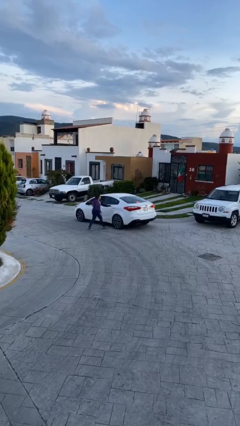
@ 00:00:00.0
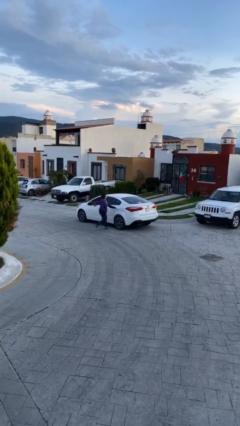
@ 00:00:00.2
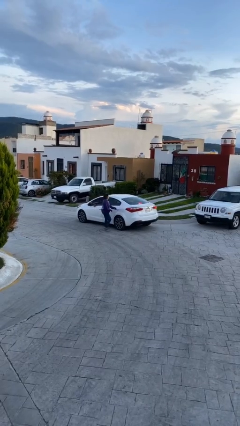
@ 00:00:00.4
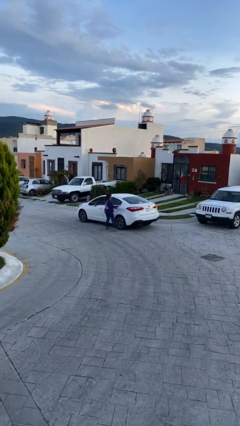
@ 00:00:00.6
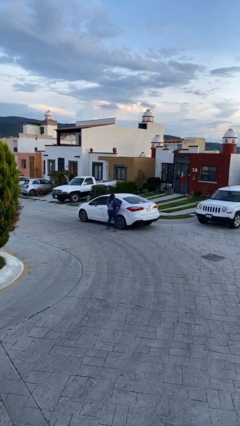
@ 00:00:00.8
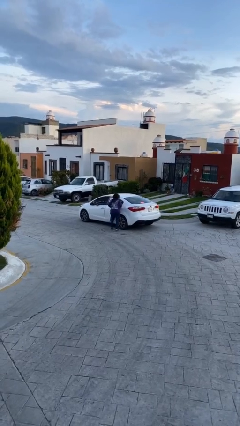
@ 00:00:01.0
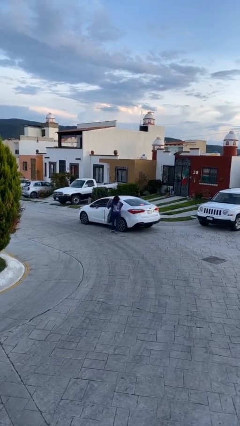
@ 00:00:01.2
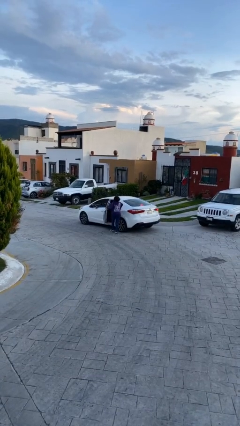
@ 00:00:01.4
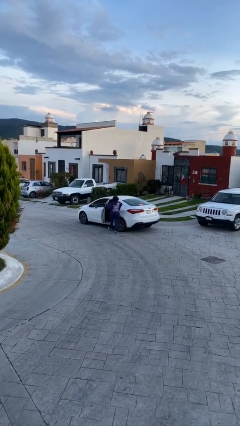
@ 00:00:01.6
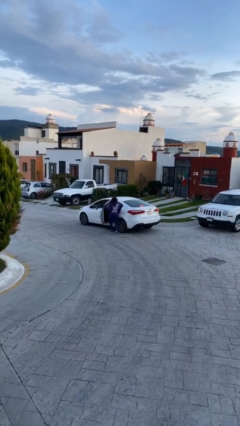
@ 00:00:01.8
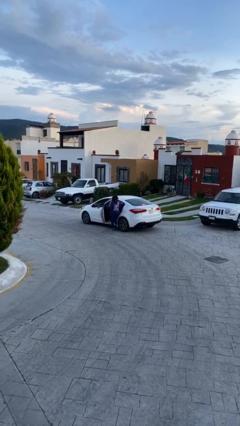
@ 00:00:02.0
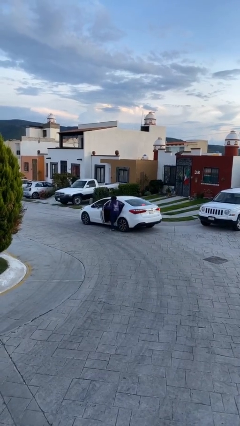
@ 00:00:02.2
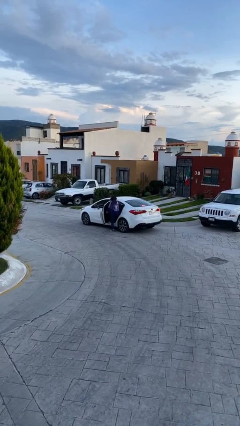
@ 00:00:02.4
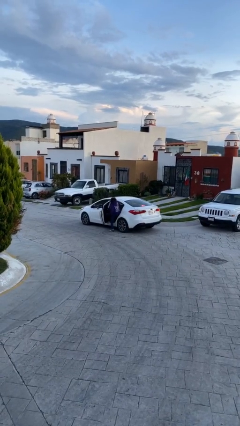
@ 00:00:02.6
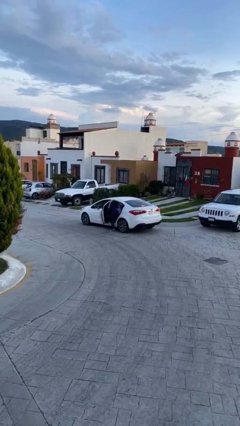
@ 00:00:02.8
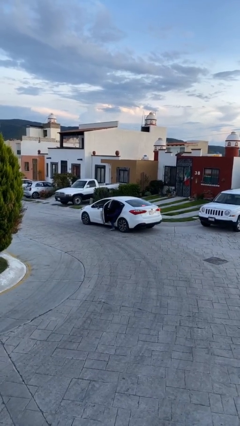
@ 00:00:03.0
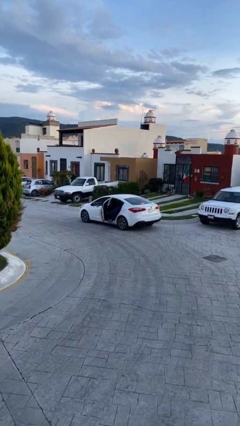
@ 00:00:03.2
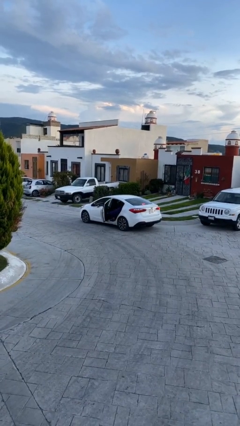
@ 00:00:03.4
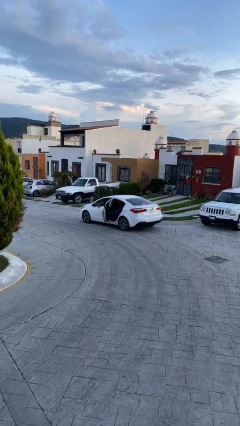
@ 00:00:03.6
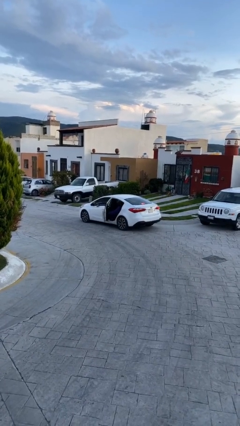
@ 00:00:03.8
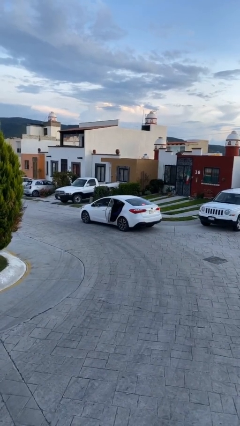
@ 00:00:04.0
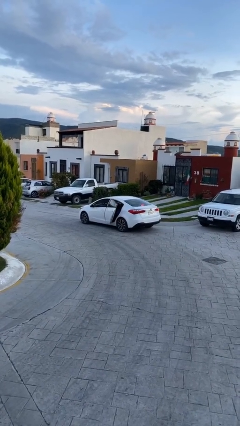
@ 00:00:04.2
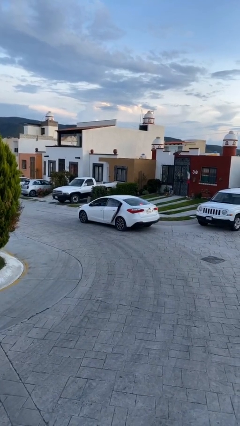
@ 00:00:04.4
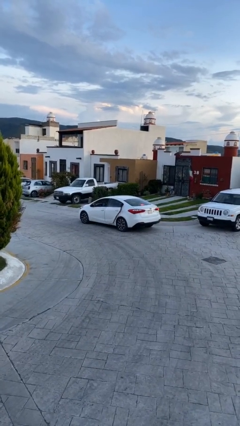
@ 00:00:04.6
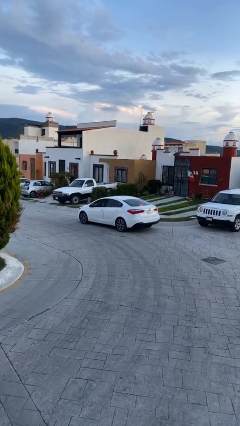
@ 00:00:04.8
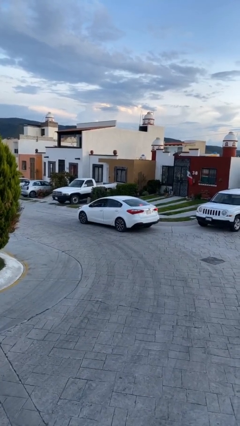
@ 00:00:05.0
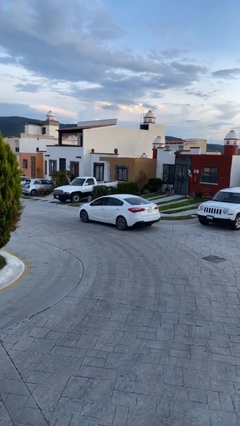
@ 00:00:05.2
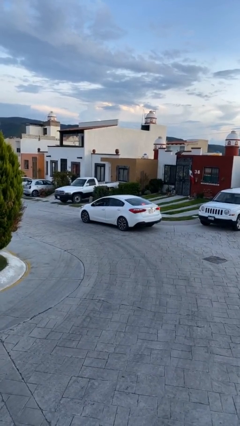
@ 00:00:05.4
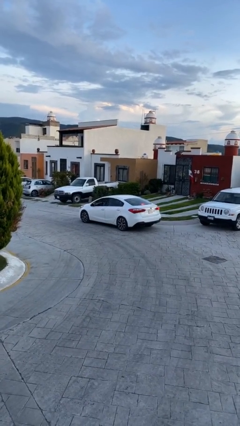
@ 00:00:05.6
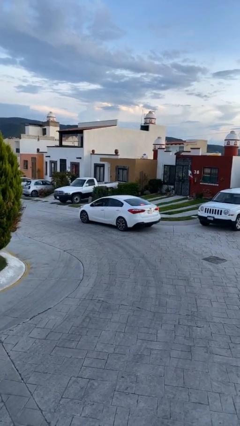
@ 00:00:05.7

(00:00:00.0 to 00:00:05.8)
car picks up person

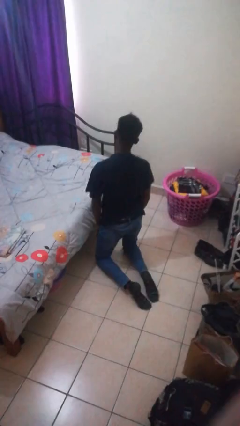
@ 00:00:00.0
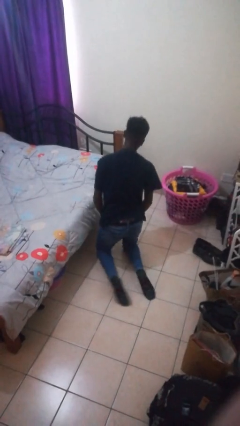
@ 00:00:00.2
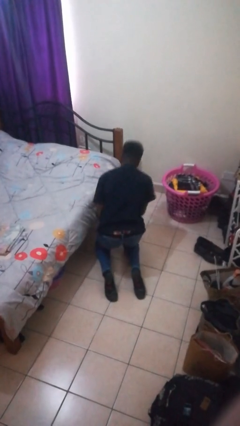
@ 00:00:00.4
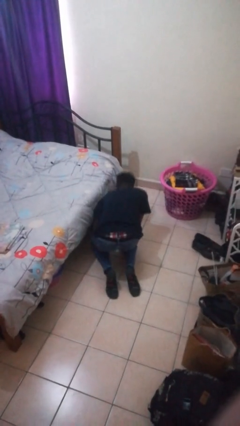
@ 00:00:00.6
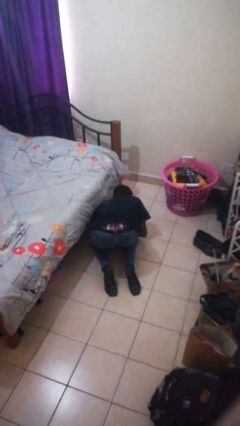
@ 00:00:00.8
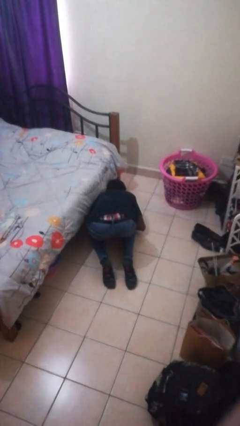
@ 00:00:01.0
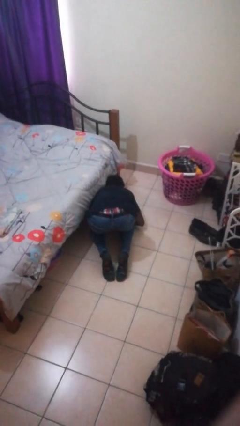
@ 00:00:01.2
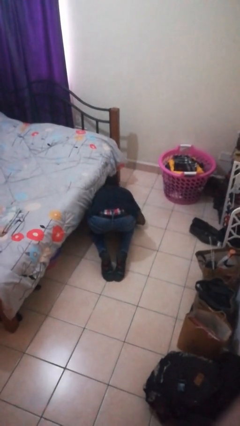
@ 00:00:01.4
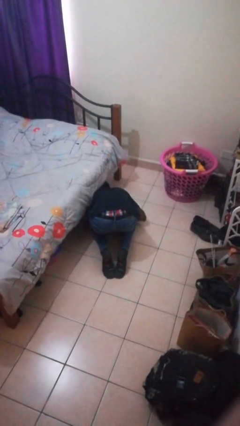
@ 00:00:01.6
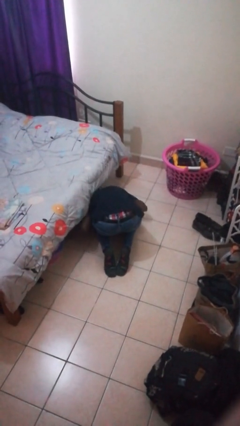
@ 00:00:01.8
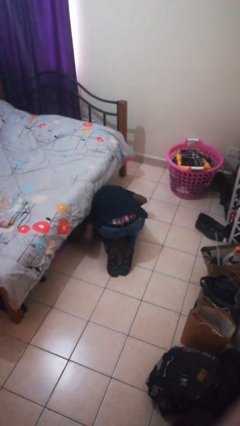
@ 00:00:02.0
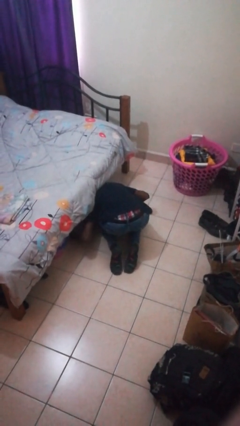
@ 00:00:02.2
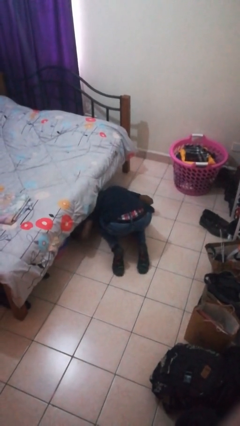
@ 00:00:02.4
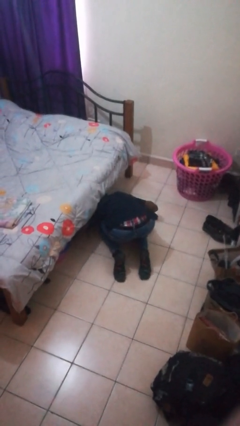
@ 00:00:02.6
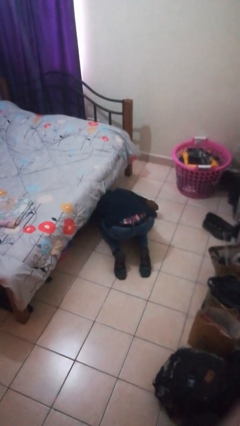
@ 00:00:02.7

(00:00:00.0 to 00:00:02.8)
person searches under bed

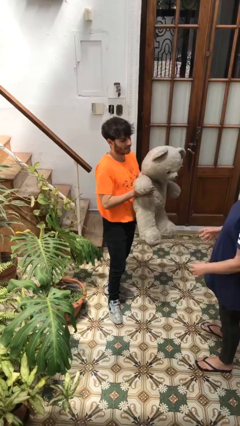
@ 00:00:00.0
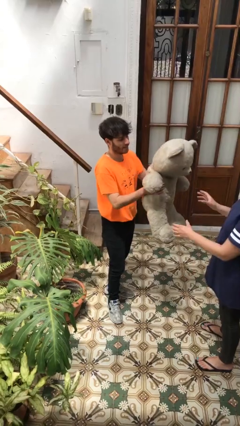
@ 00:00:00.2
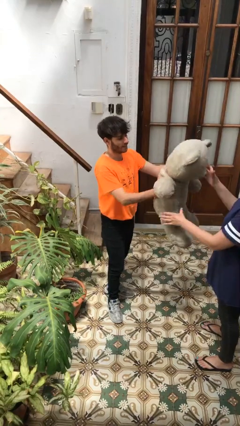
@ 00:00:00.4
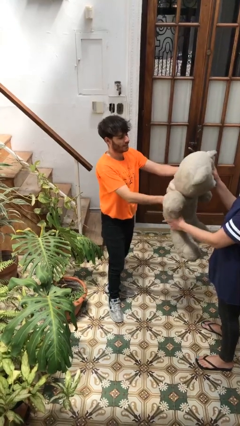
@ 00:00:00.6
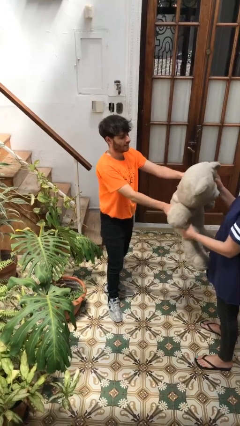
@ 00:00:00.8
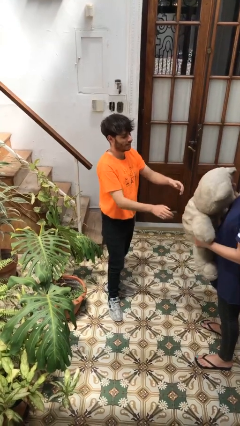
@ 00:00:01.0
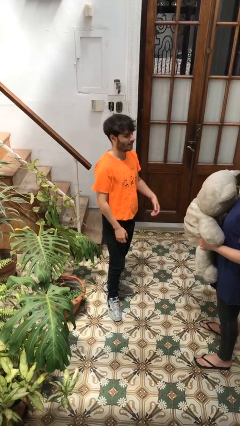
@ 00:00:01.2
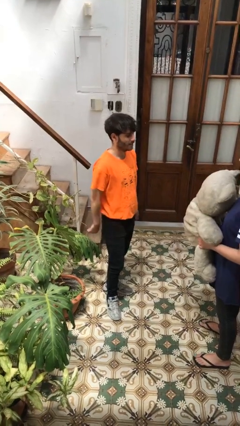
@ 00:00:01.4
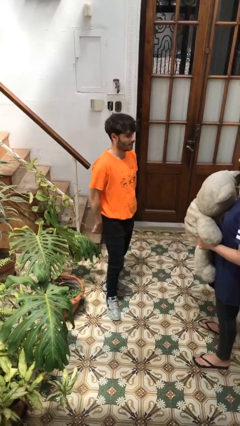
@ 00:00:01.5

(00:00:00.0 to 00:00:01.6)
person transfers object to person

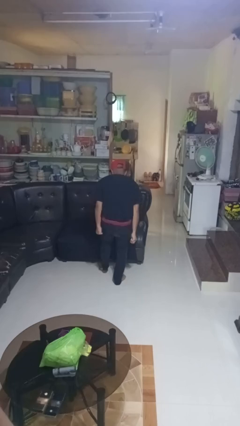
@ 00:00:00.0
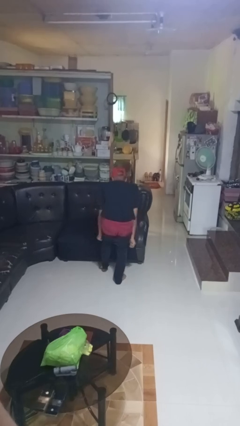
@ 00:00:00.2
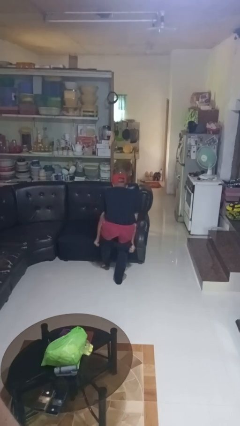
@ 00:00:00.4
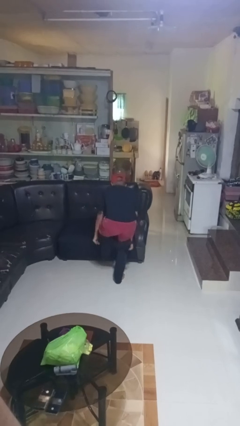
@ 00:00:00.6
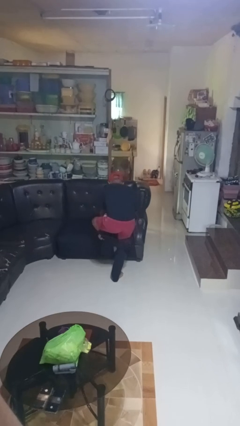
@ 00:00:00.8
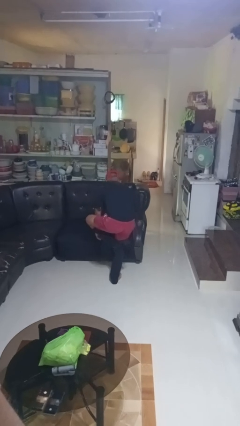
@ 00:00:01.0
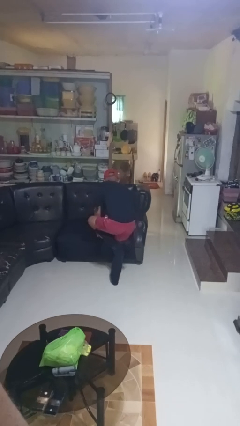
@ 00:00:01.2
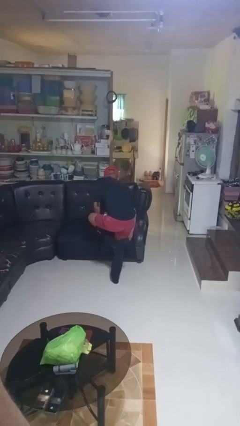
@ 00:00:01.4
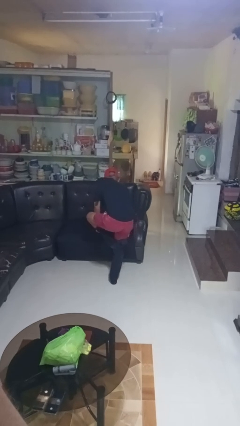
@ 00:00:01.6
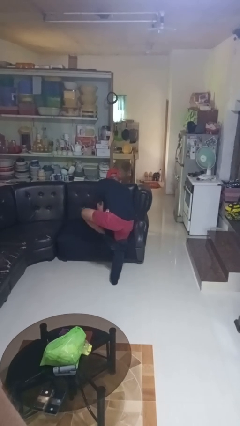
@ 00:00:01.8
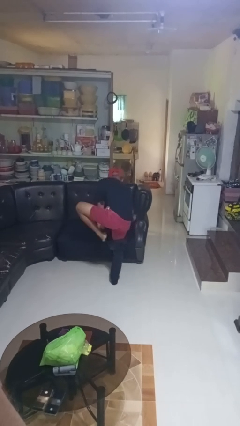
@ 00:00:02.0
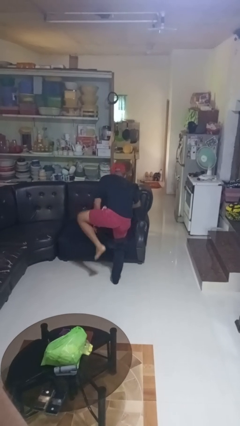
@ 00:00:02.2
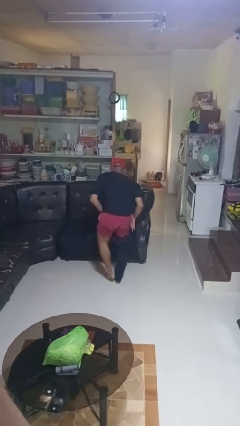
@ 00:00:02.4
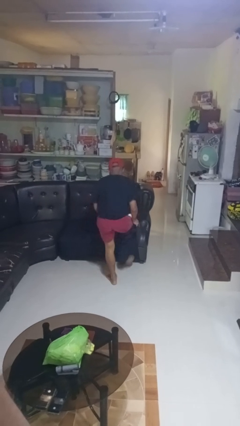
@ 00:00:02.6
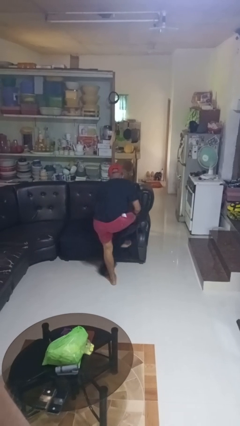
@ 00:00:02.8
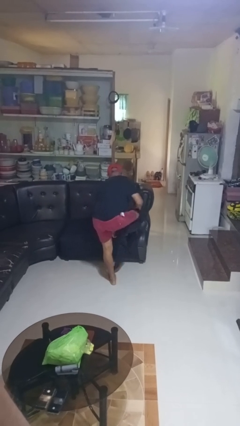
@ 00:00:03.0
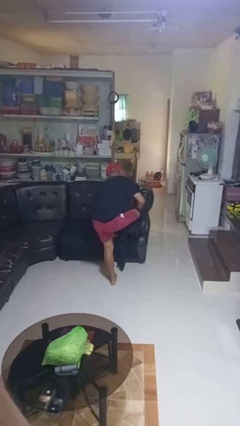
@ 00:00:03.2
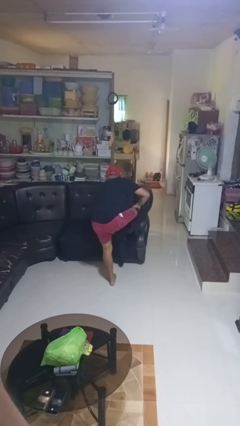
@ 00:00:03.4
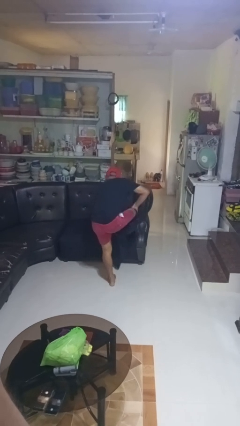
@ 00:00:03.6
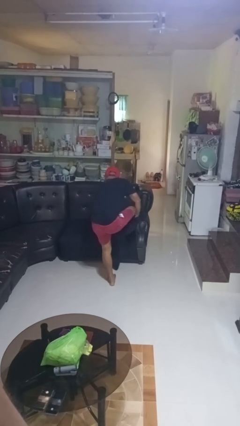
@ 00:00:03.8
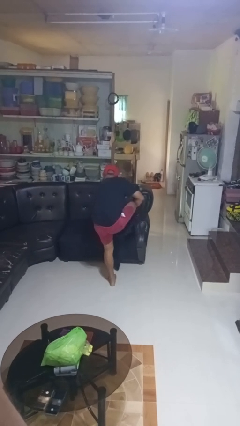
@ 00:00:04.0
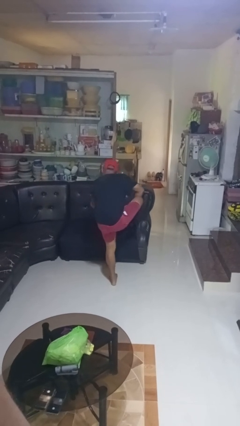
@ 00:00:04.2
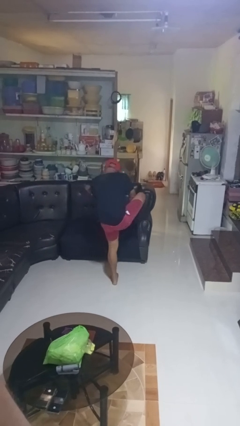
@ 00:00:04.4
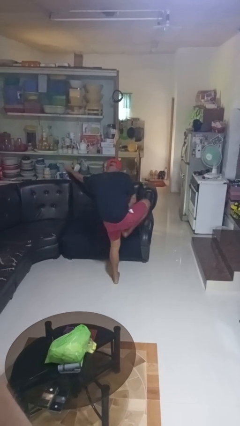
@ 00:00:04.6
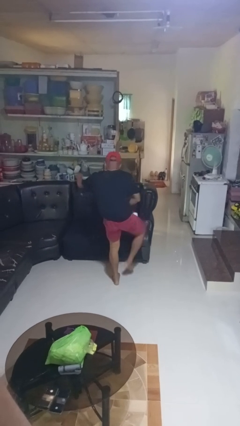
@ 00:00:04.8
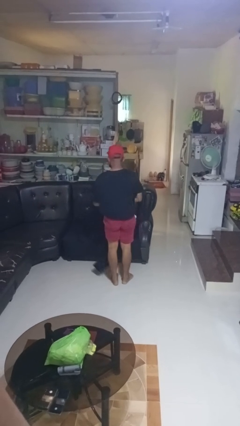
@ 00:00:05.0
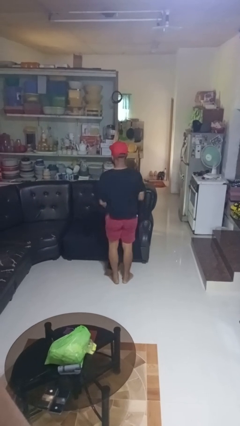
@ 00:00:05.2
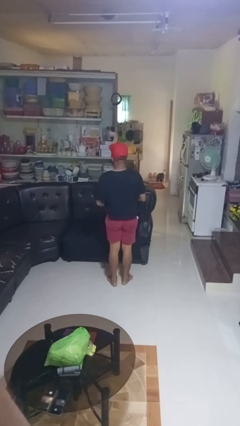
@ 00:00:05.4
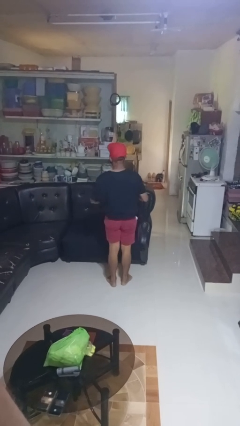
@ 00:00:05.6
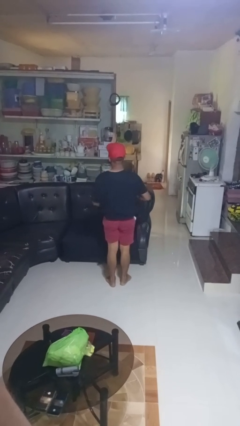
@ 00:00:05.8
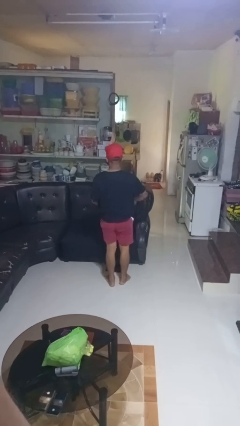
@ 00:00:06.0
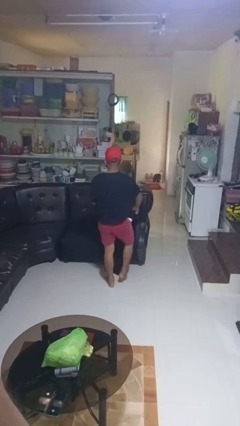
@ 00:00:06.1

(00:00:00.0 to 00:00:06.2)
person takes off pants

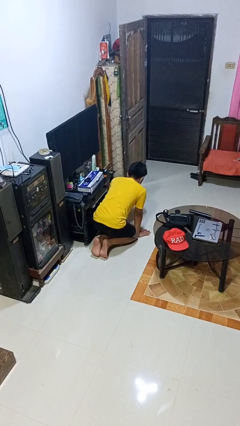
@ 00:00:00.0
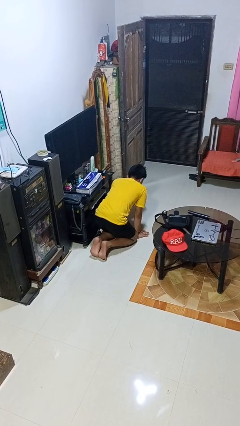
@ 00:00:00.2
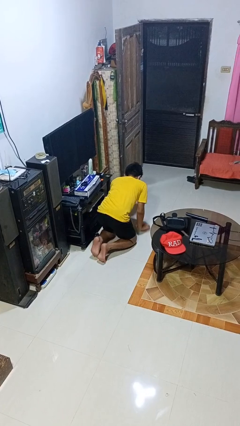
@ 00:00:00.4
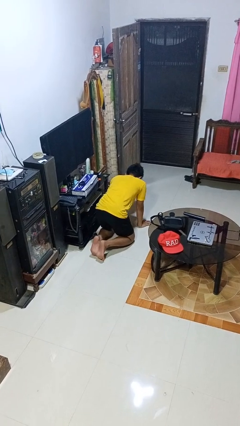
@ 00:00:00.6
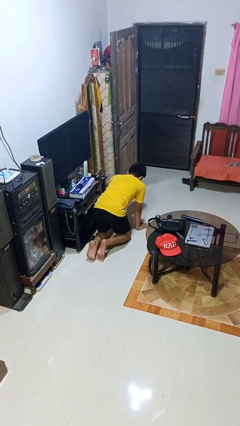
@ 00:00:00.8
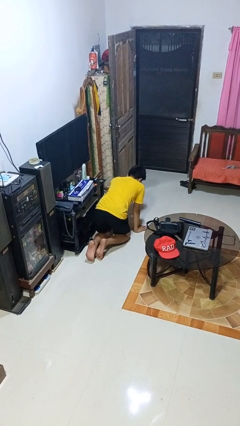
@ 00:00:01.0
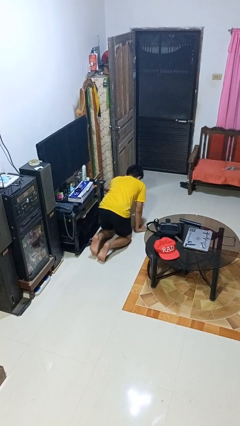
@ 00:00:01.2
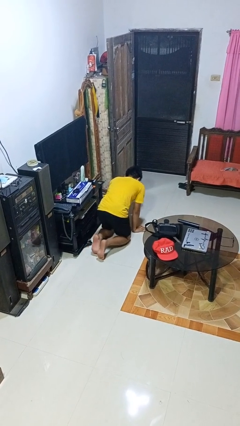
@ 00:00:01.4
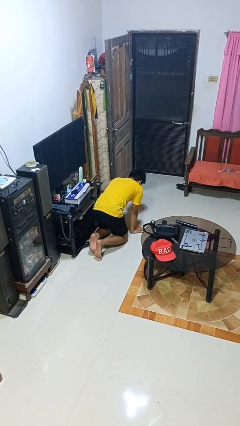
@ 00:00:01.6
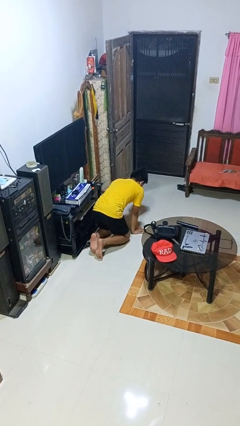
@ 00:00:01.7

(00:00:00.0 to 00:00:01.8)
person crawls
